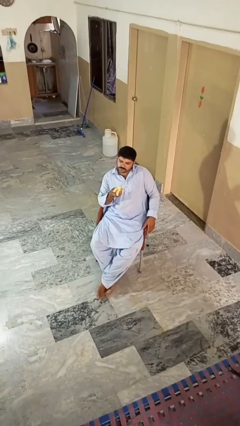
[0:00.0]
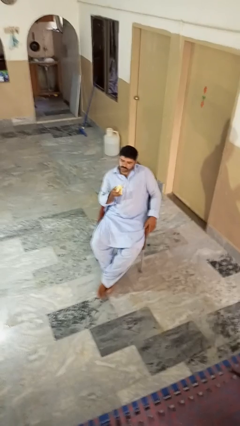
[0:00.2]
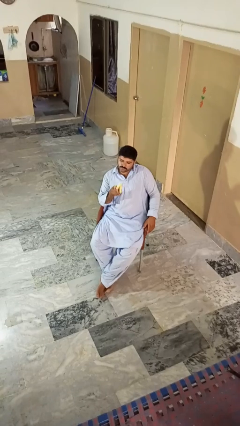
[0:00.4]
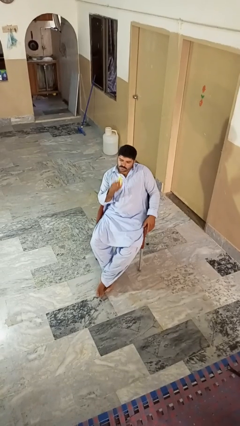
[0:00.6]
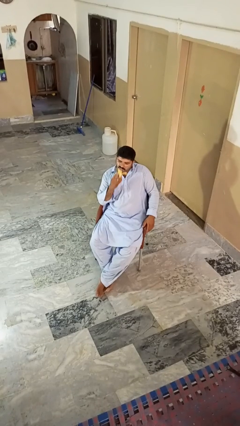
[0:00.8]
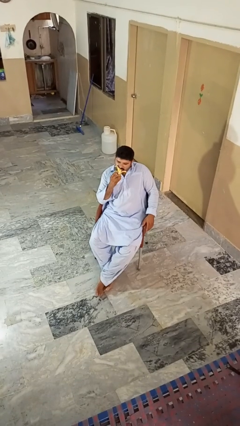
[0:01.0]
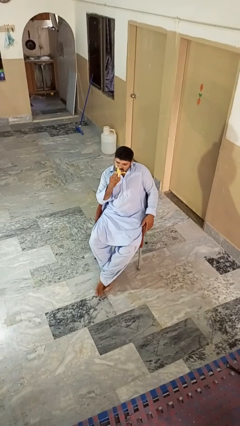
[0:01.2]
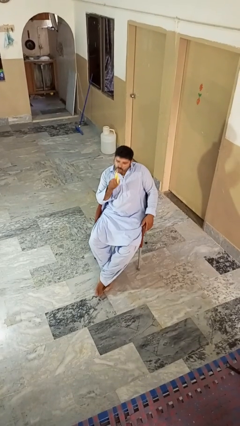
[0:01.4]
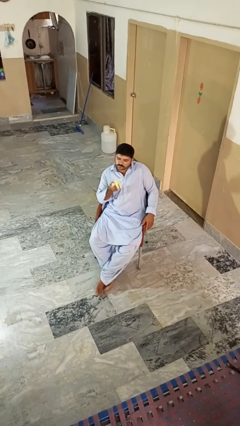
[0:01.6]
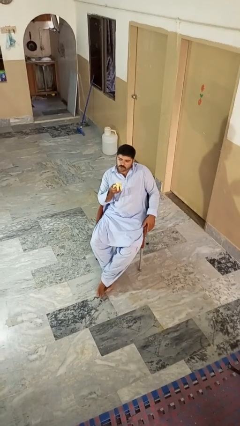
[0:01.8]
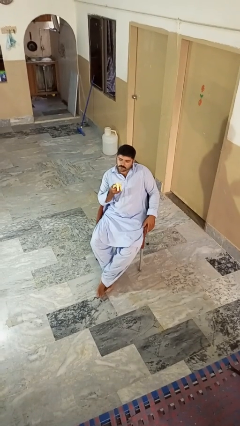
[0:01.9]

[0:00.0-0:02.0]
person eats banana

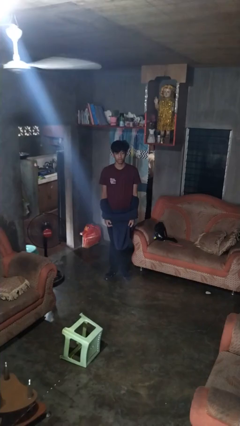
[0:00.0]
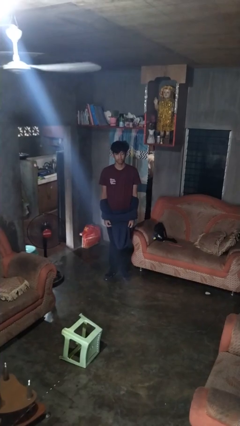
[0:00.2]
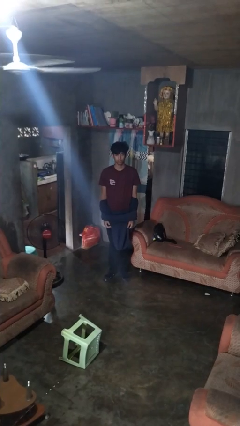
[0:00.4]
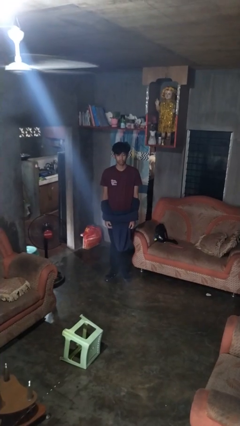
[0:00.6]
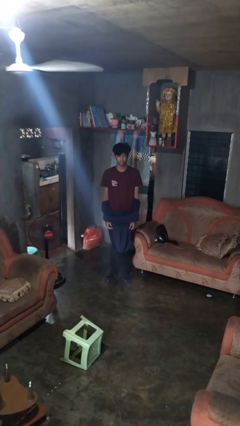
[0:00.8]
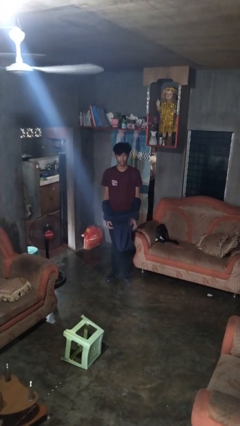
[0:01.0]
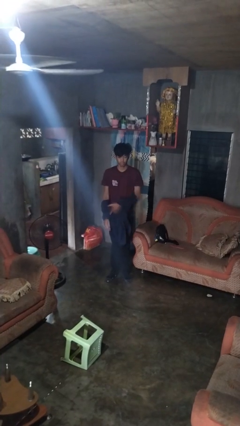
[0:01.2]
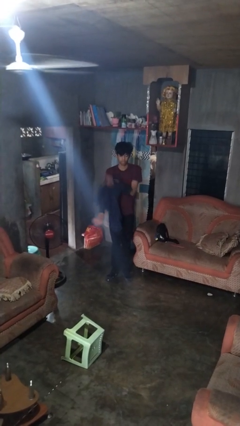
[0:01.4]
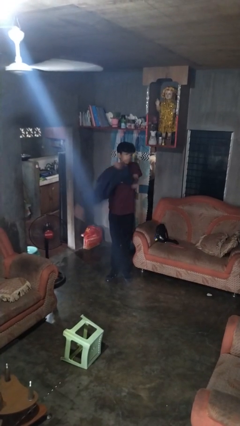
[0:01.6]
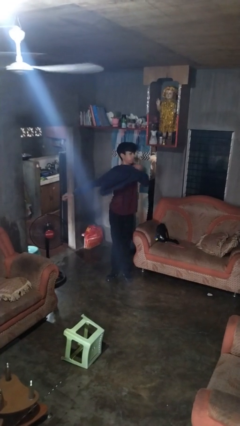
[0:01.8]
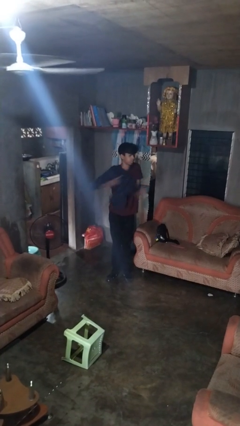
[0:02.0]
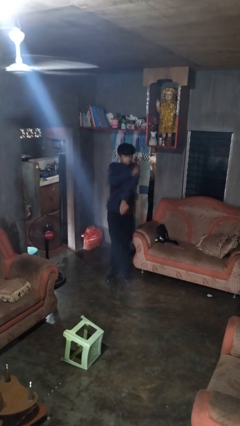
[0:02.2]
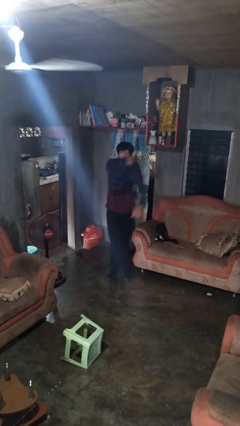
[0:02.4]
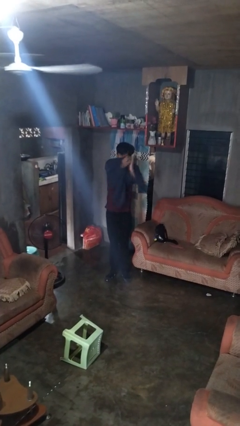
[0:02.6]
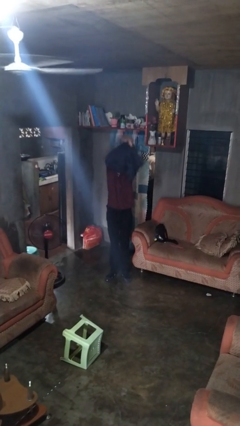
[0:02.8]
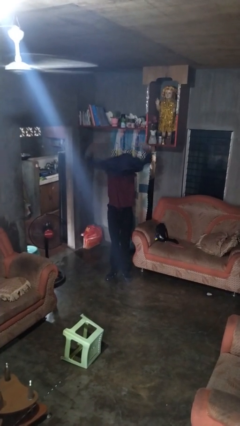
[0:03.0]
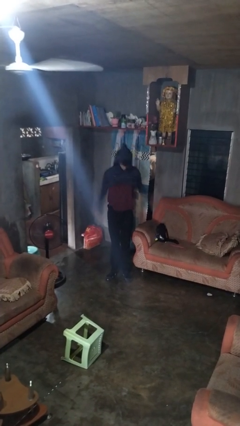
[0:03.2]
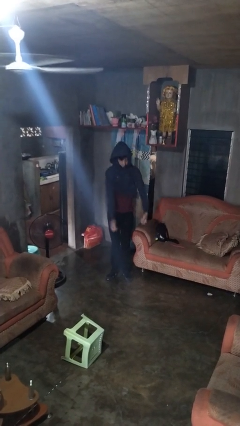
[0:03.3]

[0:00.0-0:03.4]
person puts on hoodie

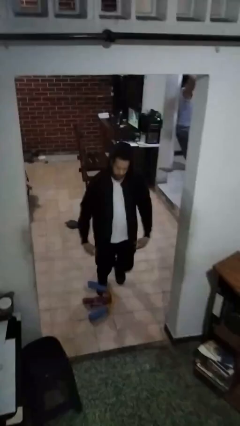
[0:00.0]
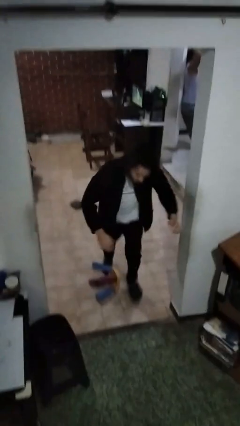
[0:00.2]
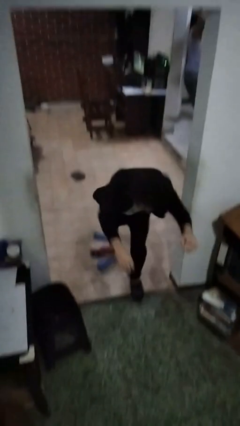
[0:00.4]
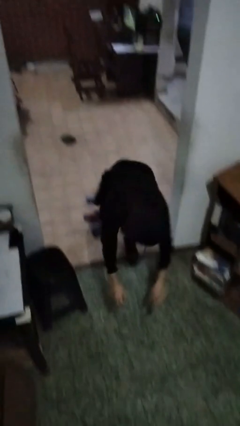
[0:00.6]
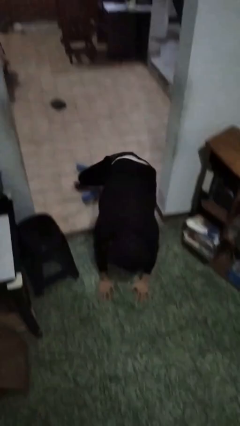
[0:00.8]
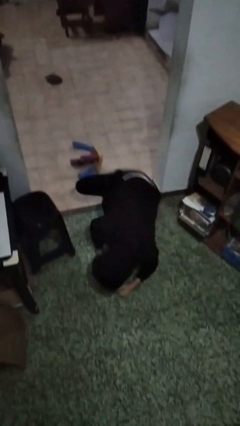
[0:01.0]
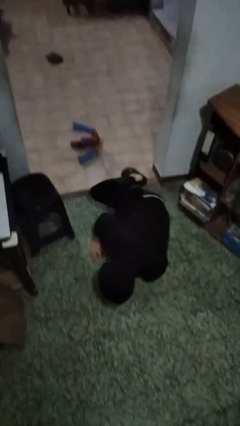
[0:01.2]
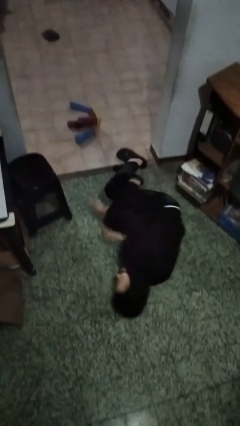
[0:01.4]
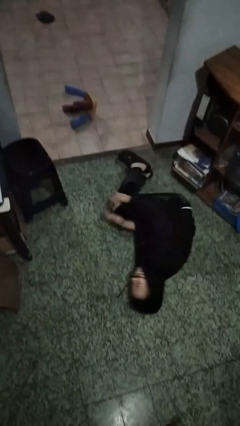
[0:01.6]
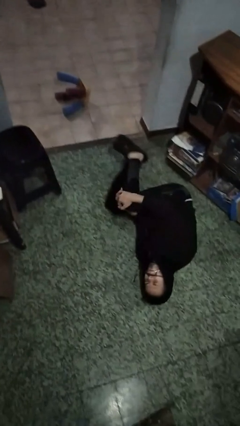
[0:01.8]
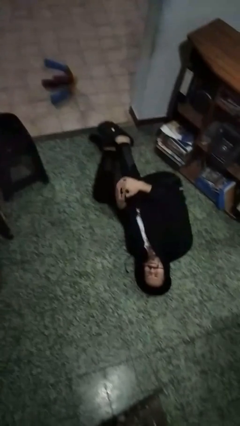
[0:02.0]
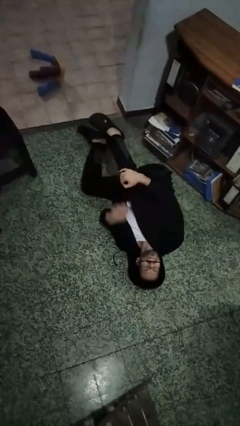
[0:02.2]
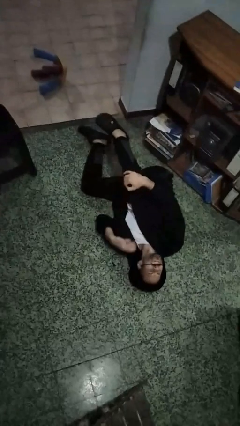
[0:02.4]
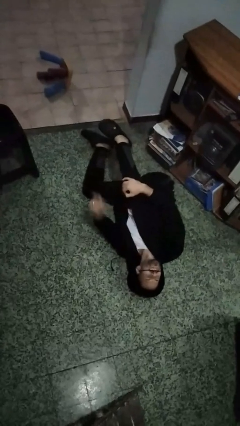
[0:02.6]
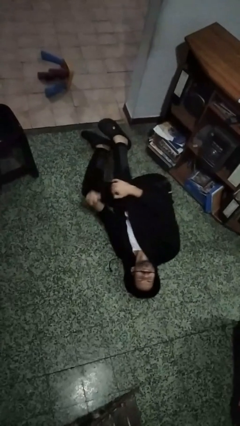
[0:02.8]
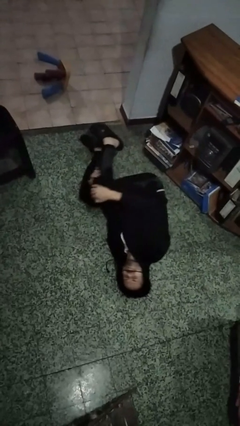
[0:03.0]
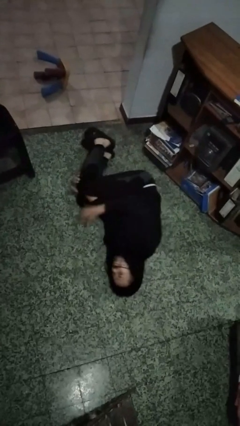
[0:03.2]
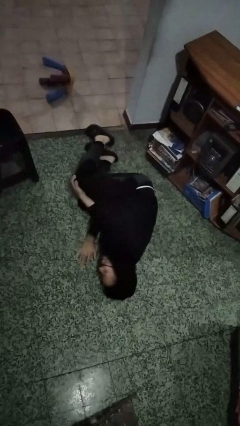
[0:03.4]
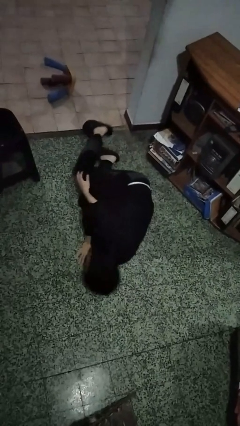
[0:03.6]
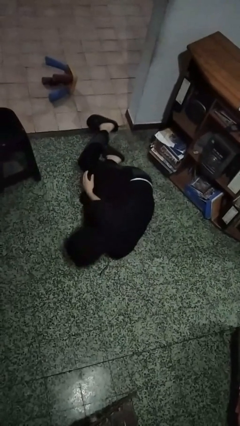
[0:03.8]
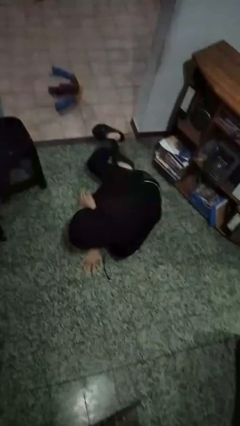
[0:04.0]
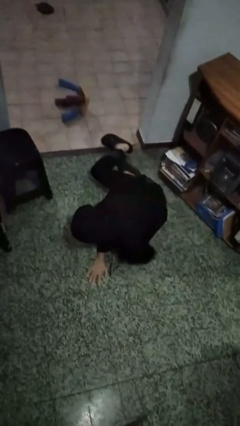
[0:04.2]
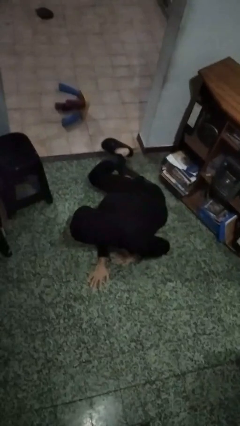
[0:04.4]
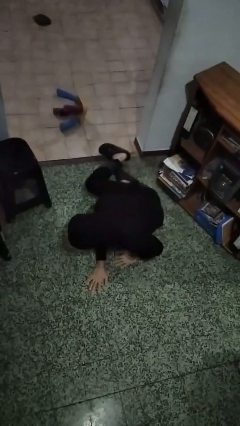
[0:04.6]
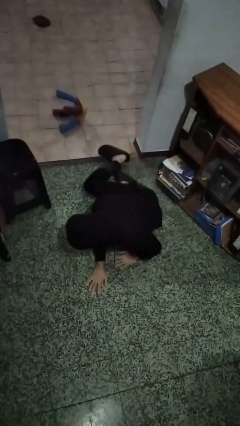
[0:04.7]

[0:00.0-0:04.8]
person lies down on floor

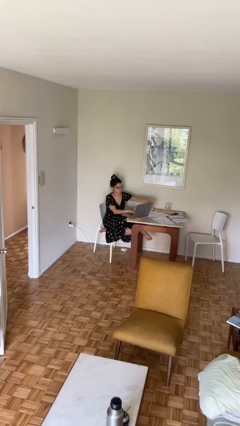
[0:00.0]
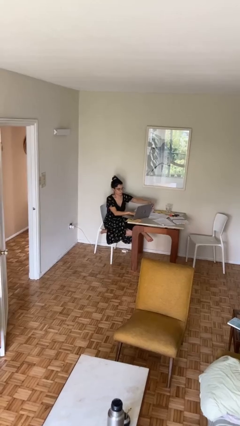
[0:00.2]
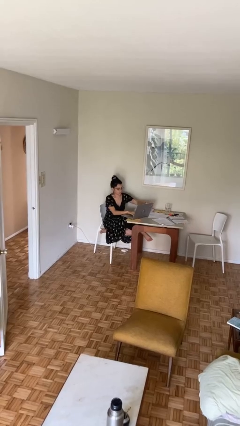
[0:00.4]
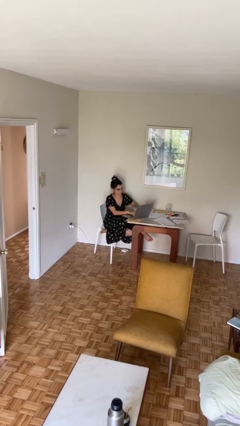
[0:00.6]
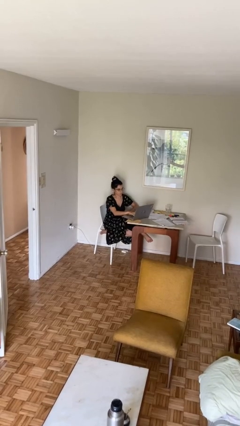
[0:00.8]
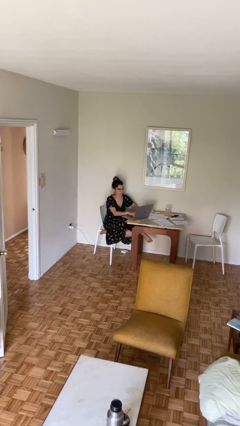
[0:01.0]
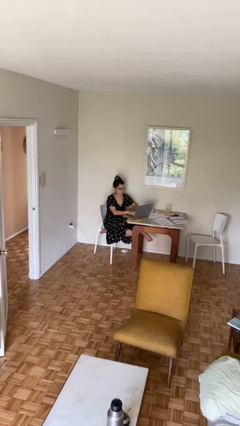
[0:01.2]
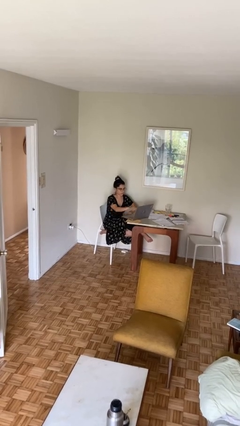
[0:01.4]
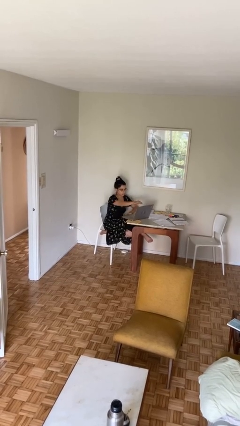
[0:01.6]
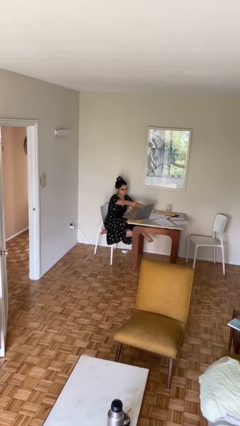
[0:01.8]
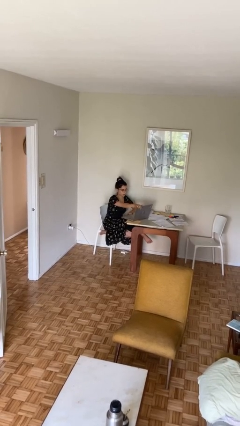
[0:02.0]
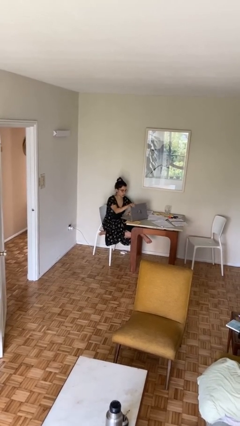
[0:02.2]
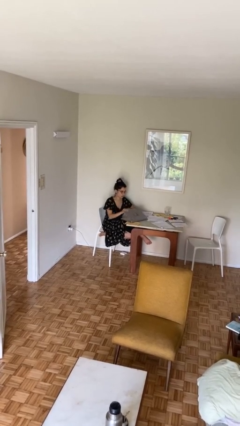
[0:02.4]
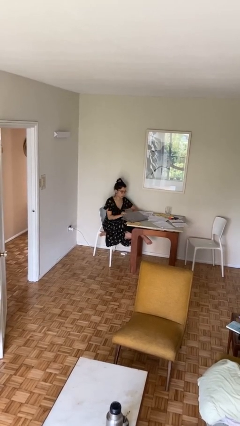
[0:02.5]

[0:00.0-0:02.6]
person interacts with laptop

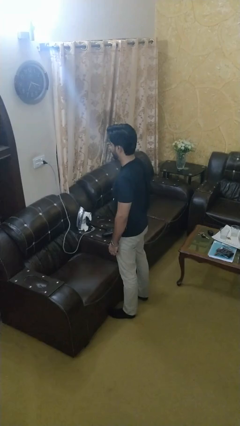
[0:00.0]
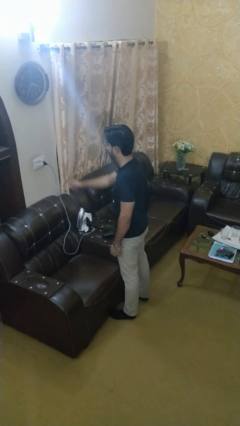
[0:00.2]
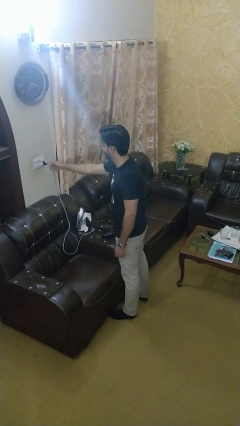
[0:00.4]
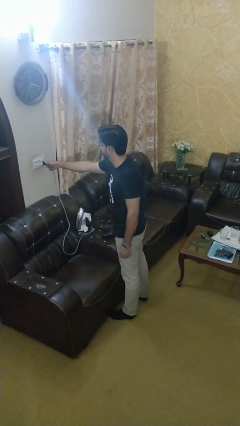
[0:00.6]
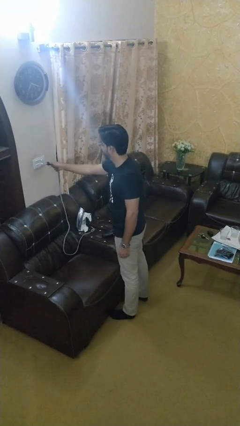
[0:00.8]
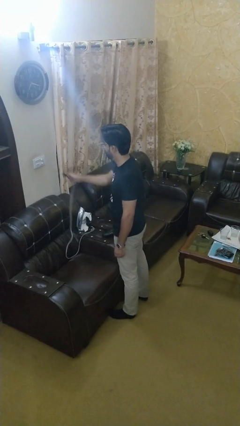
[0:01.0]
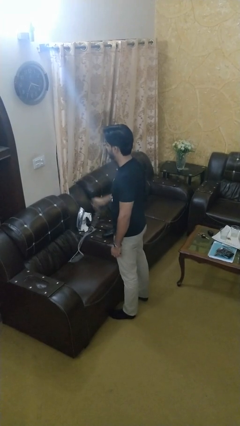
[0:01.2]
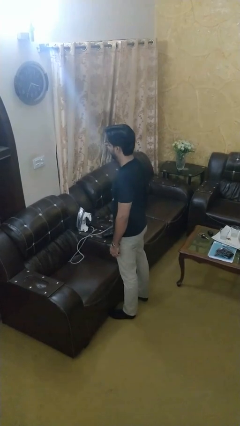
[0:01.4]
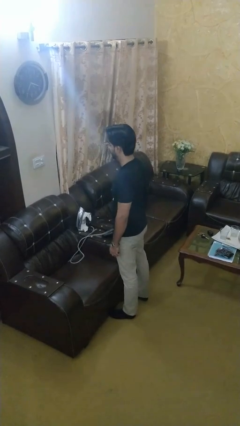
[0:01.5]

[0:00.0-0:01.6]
person unplugs from electrical socket

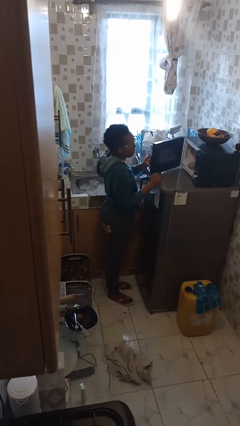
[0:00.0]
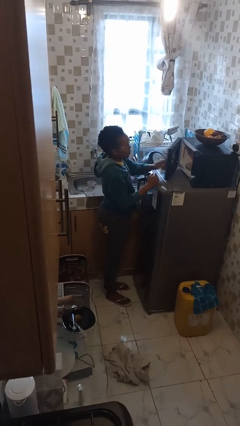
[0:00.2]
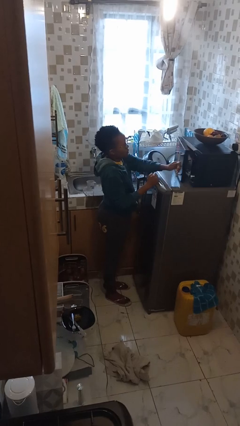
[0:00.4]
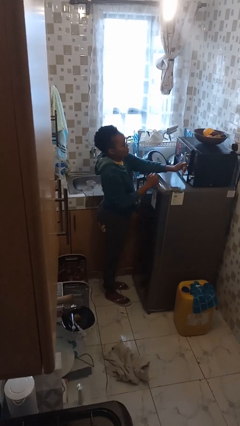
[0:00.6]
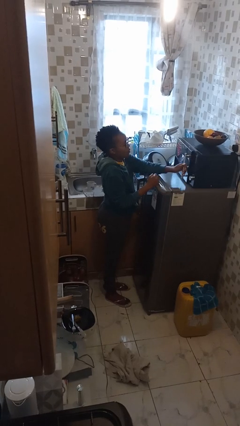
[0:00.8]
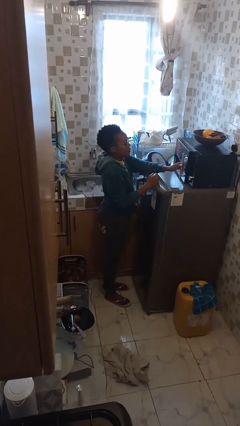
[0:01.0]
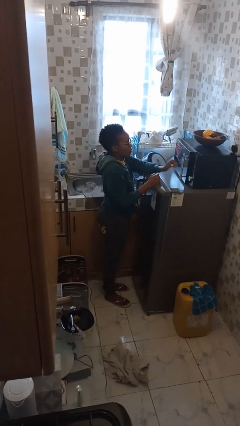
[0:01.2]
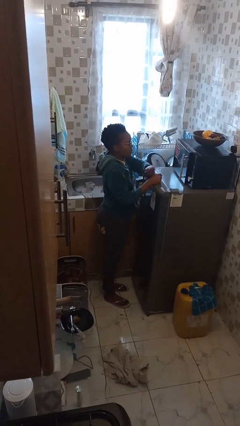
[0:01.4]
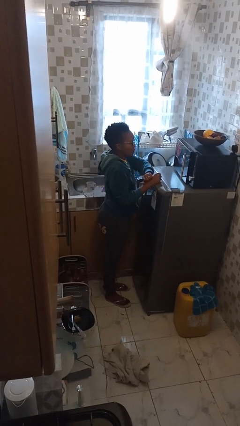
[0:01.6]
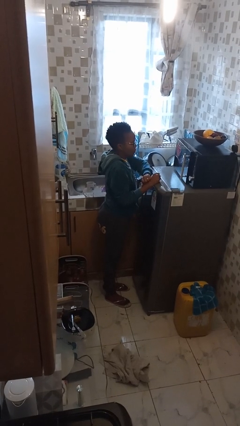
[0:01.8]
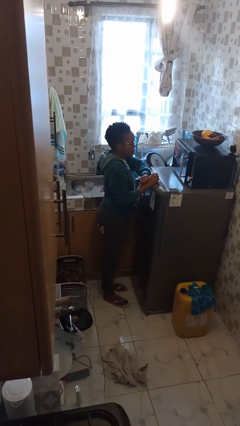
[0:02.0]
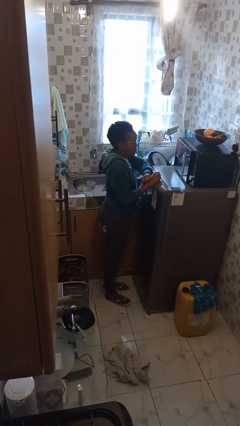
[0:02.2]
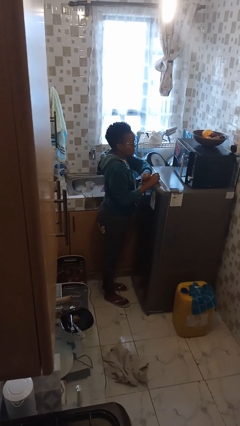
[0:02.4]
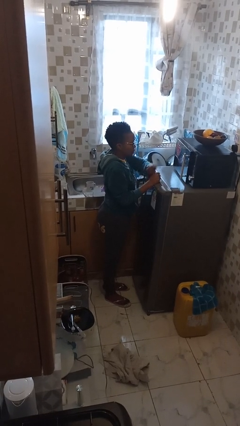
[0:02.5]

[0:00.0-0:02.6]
person closes microwave

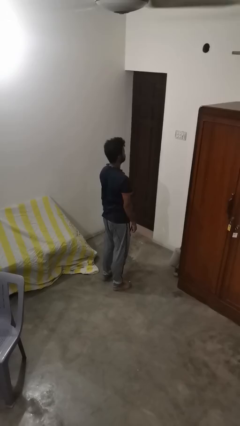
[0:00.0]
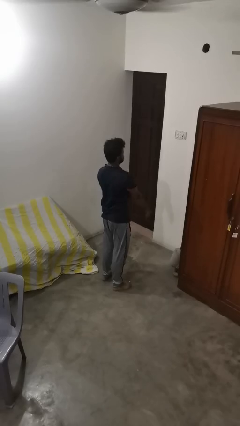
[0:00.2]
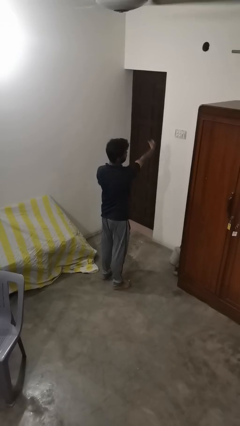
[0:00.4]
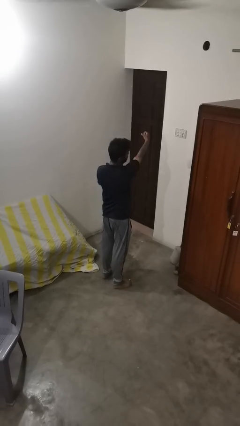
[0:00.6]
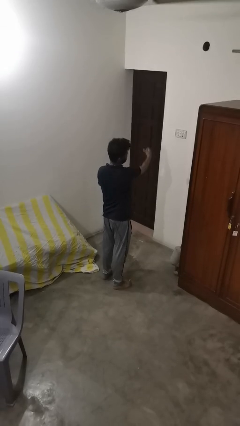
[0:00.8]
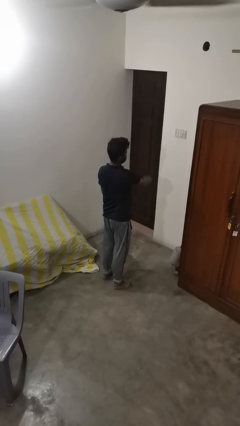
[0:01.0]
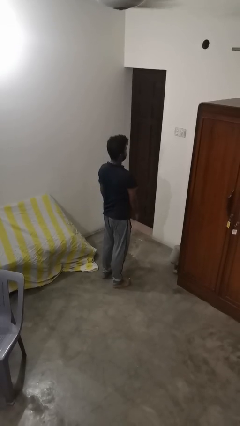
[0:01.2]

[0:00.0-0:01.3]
person punches
